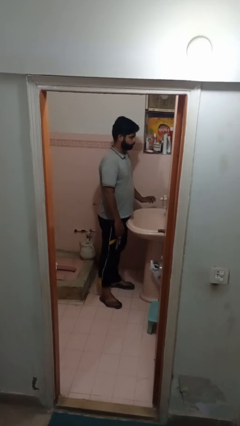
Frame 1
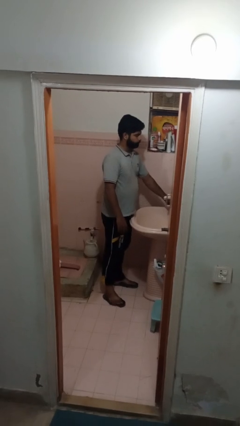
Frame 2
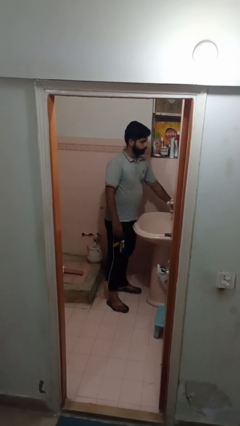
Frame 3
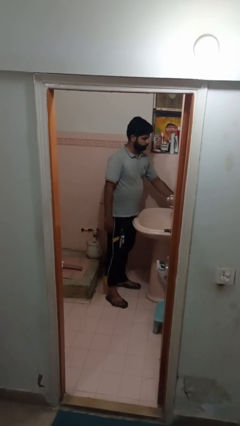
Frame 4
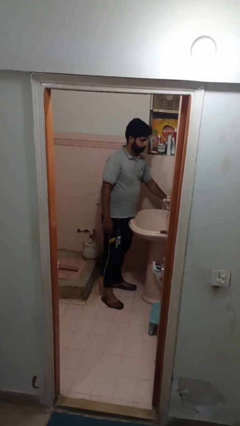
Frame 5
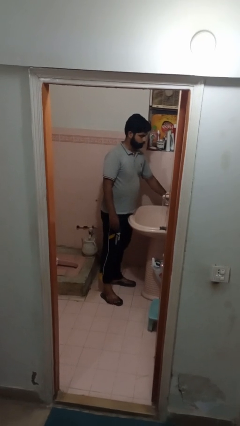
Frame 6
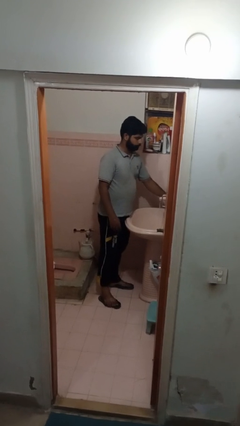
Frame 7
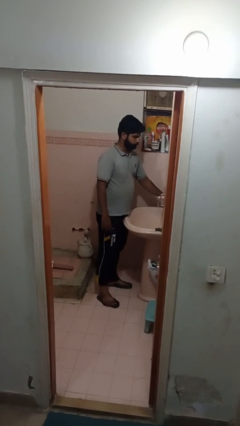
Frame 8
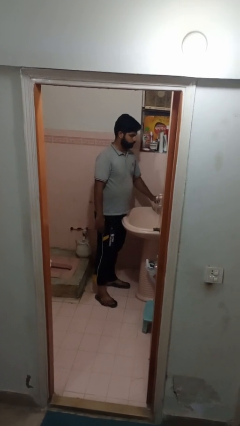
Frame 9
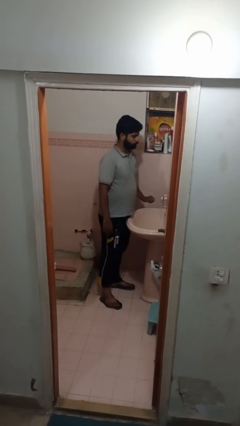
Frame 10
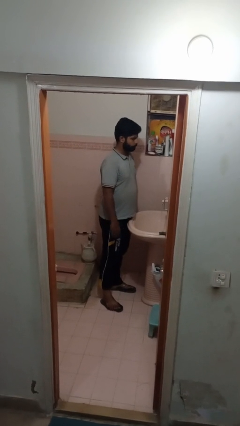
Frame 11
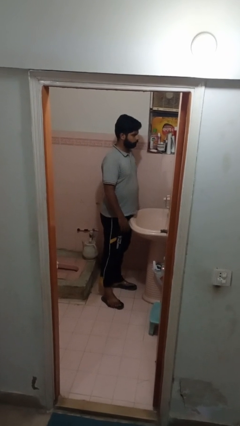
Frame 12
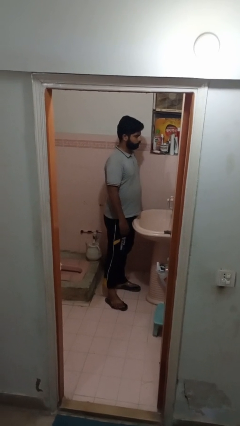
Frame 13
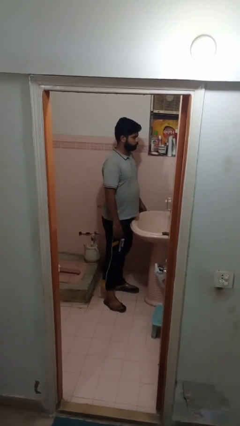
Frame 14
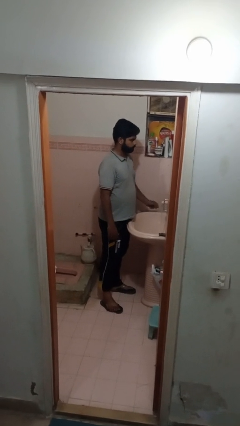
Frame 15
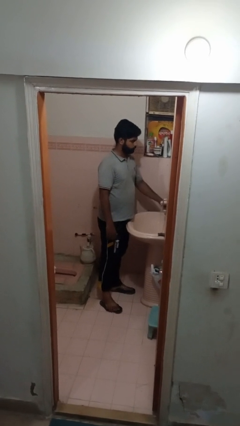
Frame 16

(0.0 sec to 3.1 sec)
person turns on faucet

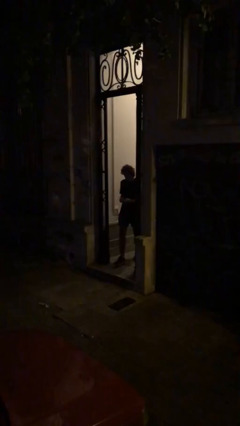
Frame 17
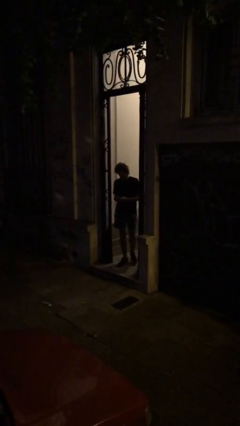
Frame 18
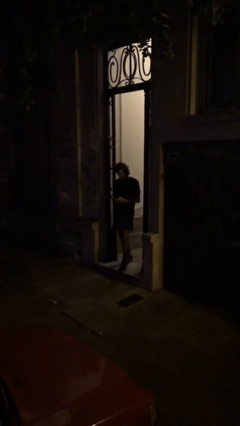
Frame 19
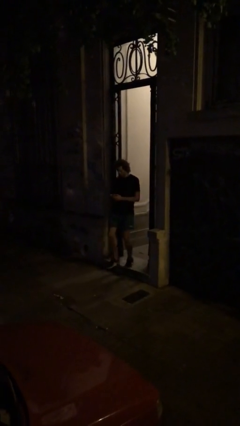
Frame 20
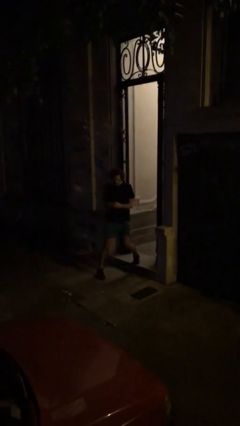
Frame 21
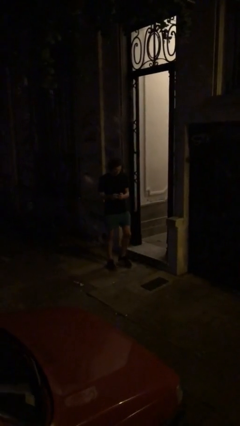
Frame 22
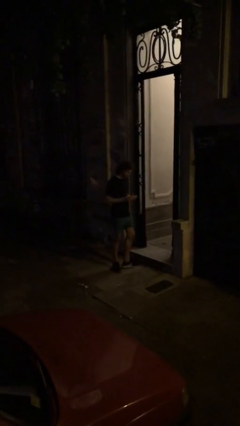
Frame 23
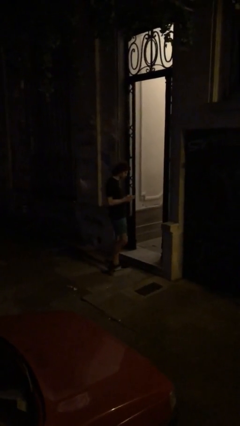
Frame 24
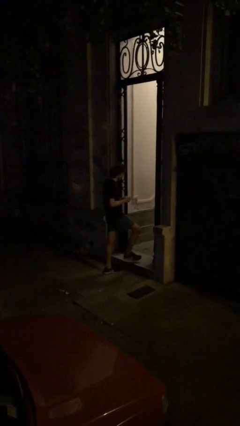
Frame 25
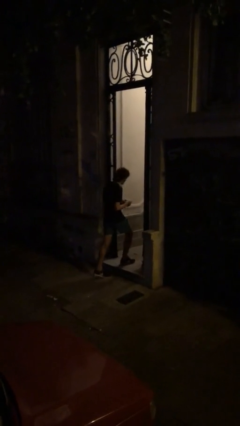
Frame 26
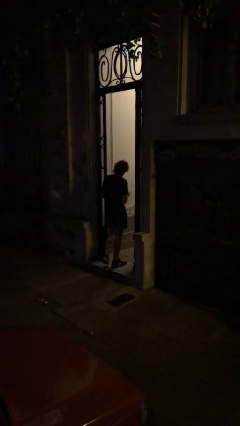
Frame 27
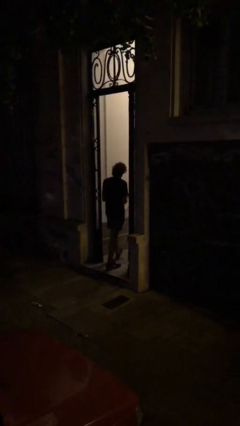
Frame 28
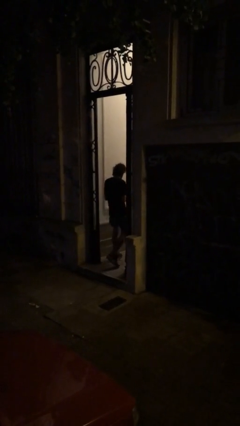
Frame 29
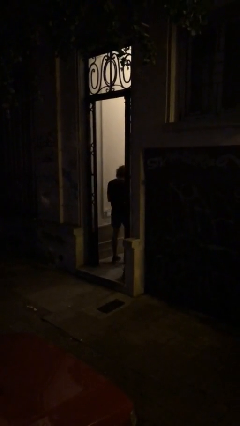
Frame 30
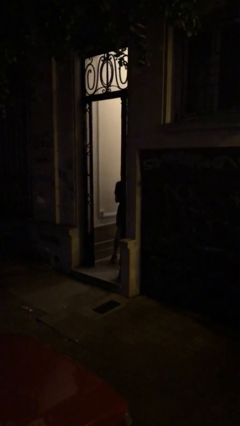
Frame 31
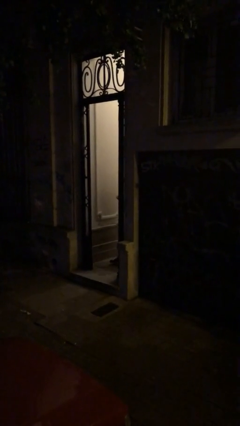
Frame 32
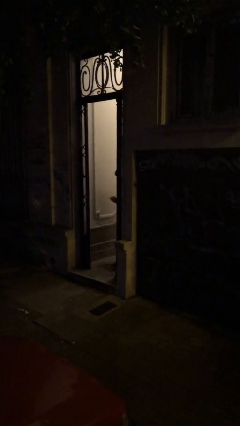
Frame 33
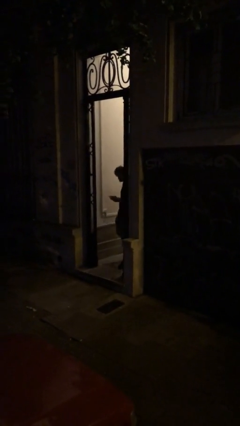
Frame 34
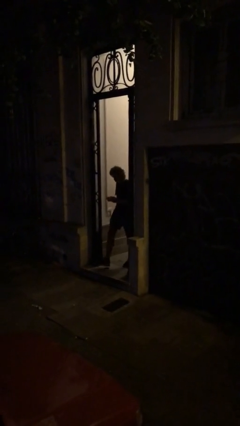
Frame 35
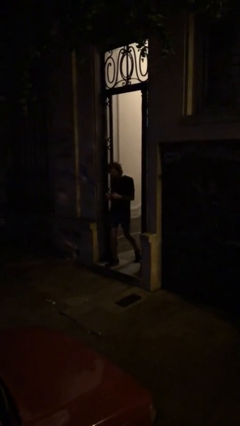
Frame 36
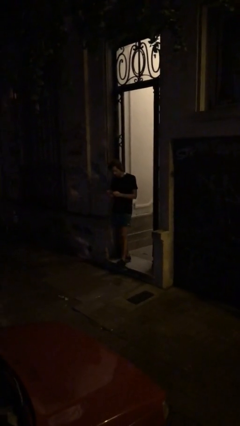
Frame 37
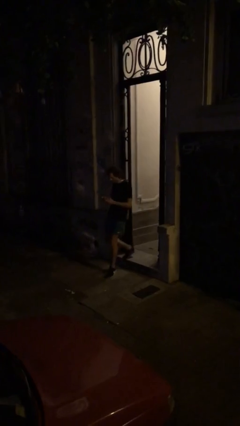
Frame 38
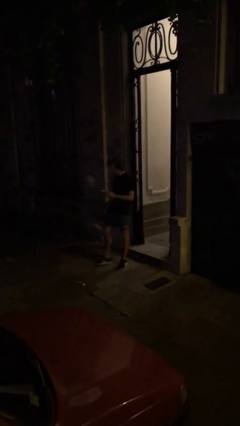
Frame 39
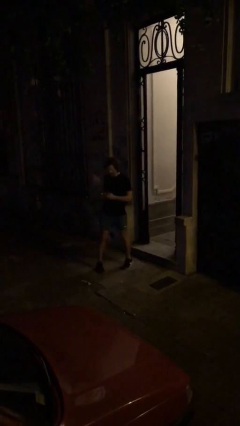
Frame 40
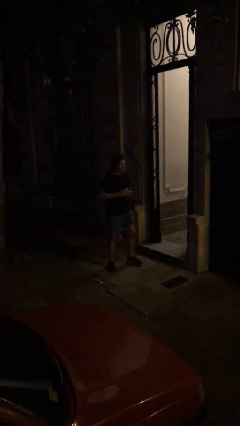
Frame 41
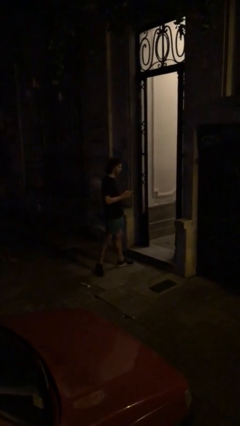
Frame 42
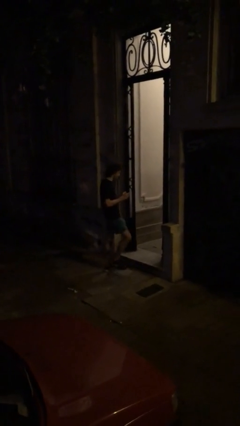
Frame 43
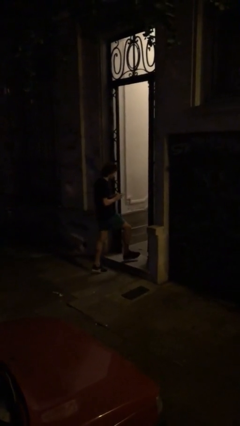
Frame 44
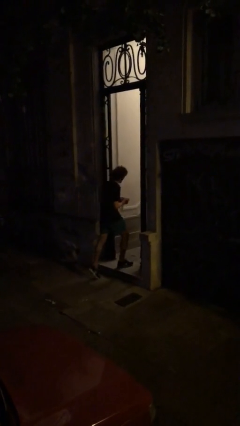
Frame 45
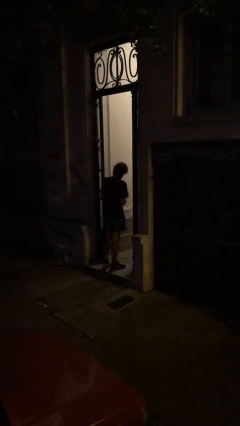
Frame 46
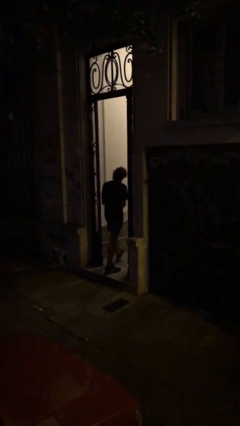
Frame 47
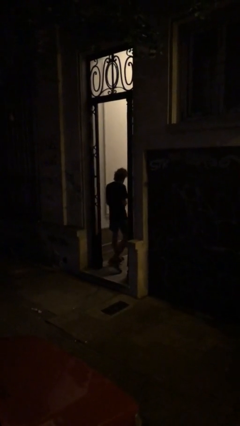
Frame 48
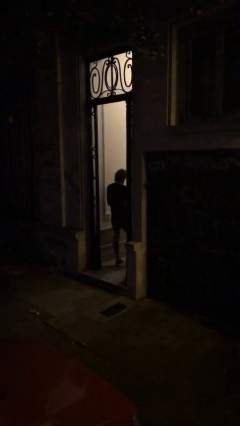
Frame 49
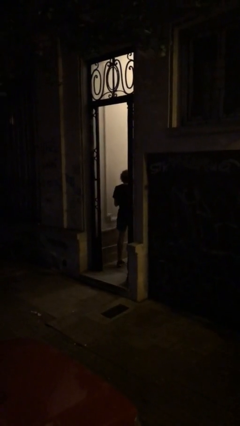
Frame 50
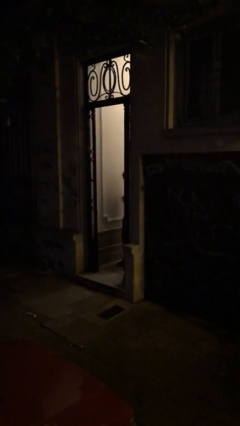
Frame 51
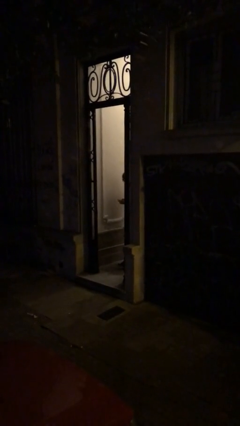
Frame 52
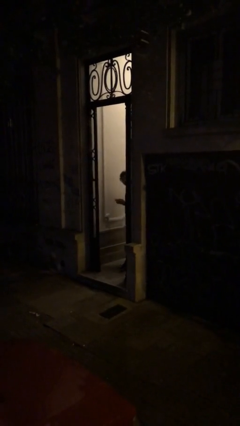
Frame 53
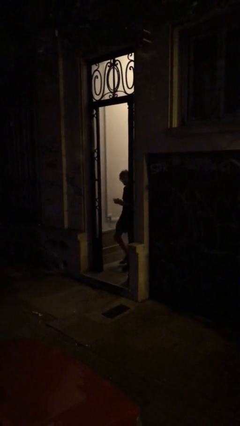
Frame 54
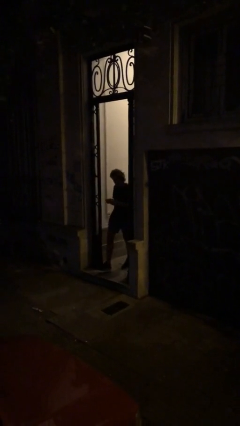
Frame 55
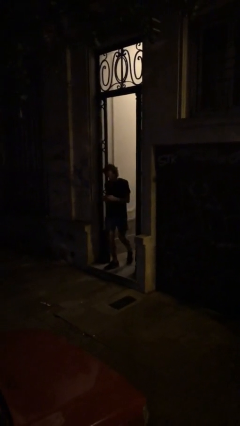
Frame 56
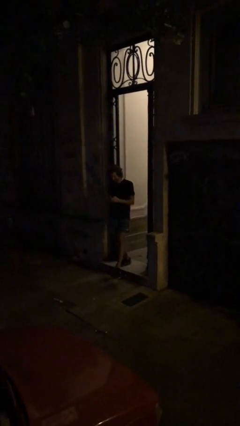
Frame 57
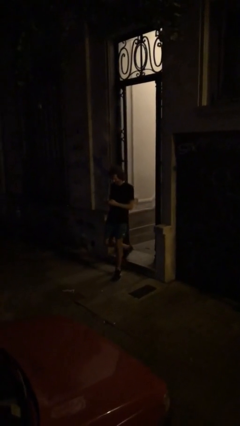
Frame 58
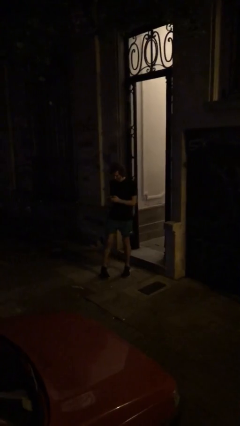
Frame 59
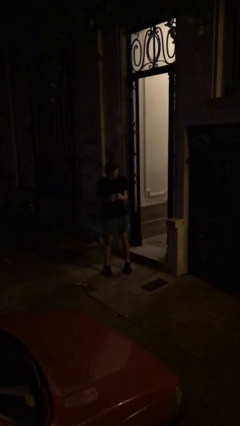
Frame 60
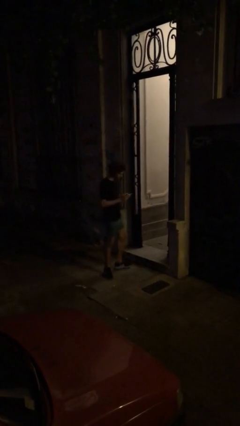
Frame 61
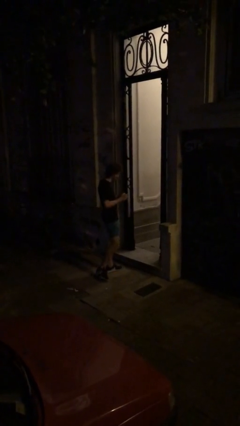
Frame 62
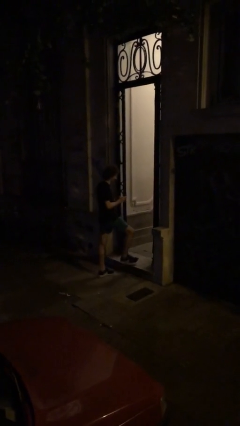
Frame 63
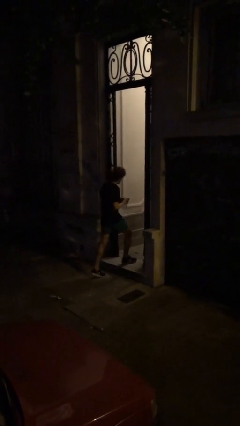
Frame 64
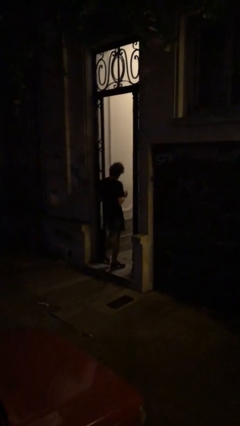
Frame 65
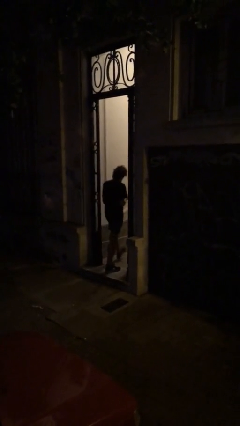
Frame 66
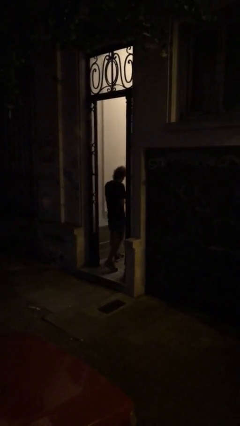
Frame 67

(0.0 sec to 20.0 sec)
person texts on phone

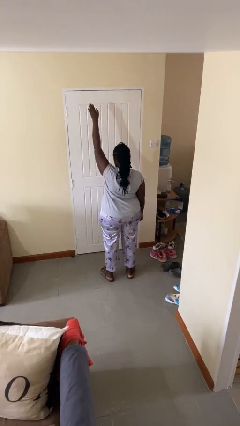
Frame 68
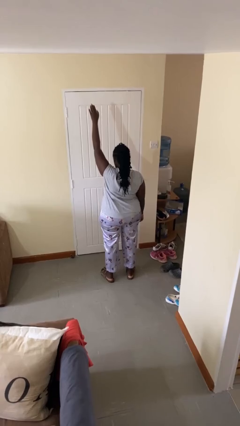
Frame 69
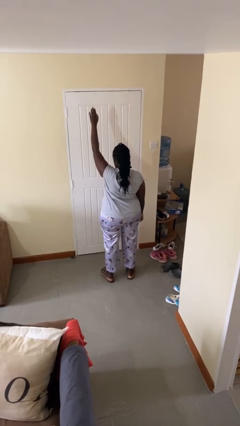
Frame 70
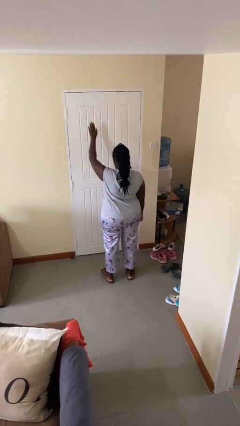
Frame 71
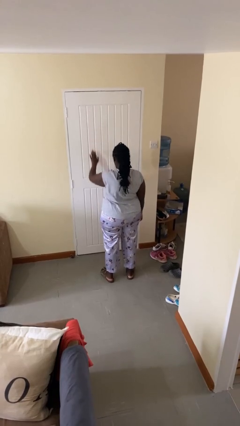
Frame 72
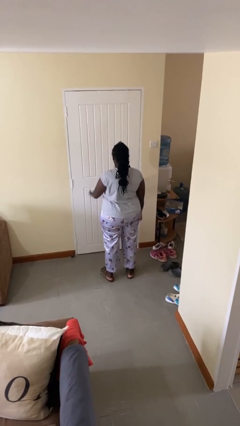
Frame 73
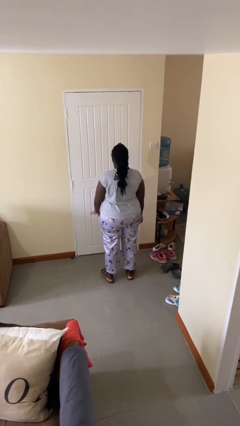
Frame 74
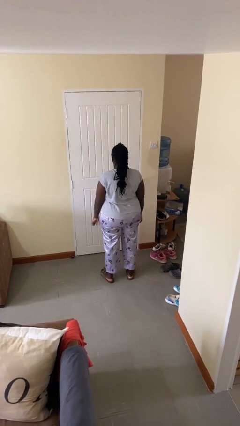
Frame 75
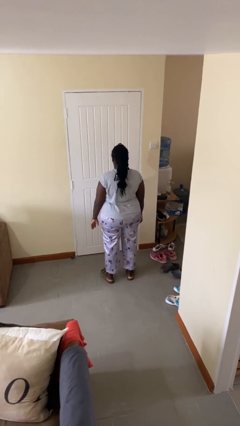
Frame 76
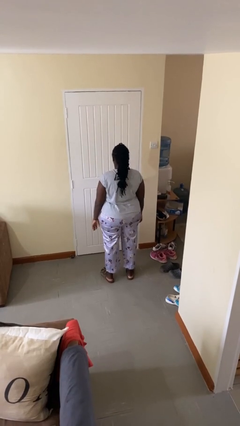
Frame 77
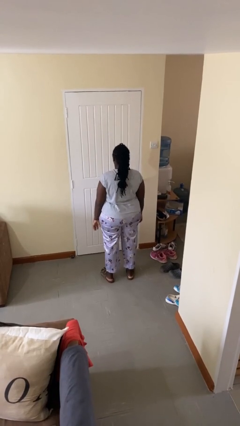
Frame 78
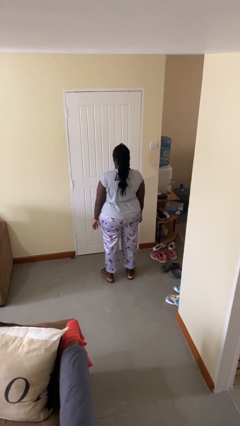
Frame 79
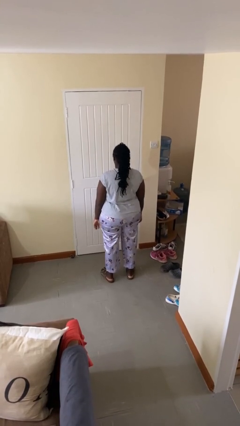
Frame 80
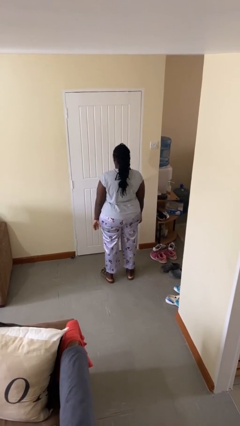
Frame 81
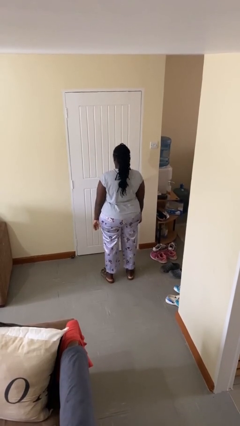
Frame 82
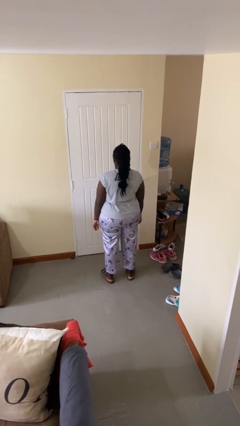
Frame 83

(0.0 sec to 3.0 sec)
person gestures swipe down

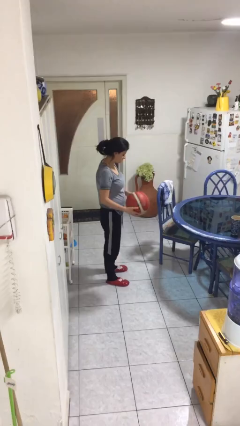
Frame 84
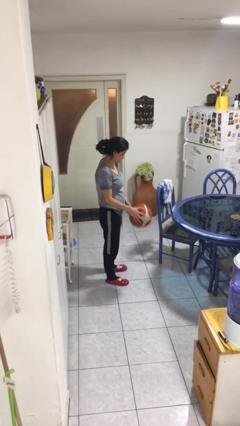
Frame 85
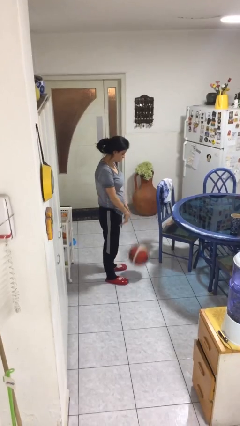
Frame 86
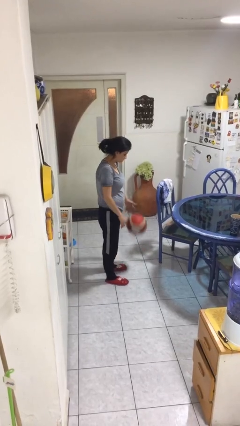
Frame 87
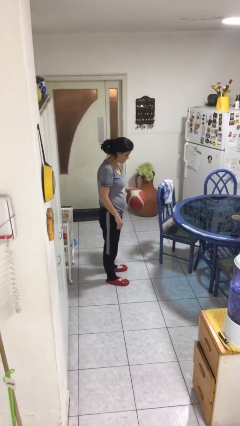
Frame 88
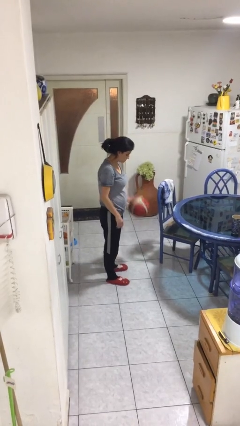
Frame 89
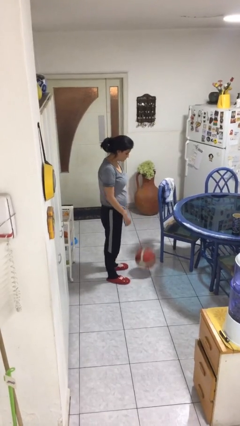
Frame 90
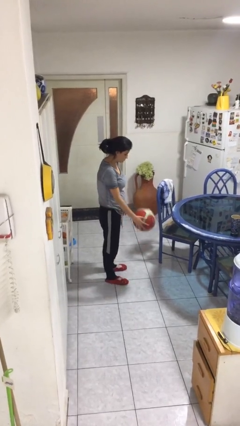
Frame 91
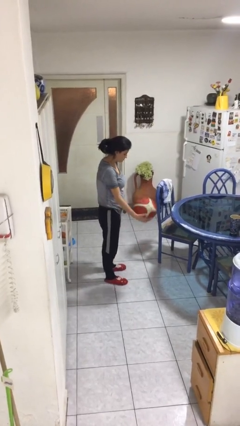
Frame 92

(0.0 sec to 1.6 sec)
person bounces ball on floor

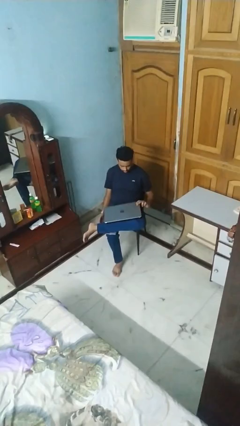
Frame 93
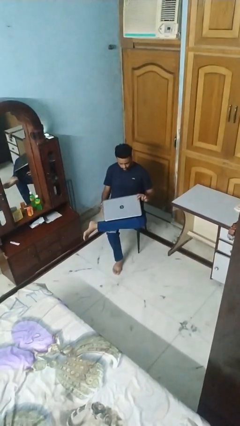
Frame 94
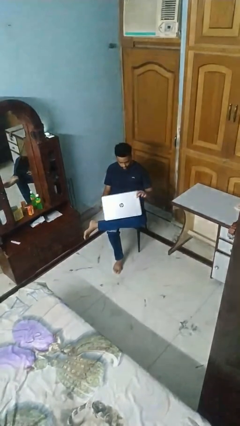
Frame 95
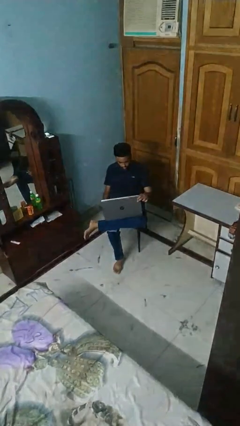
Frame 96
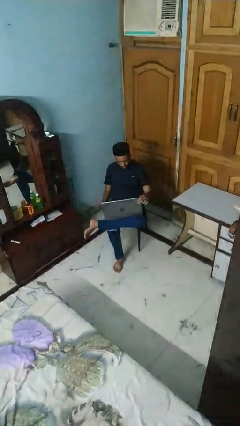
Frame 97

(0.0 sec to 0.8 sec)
person opens laptop
